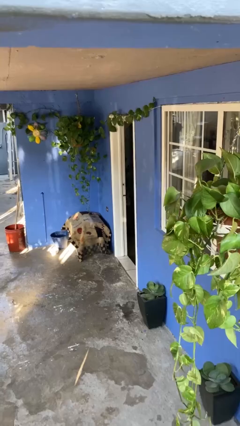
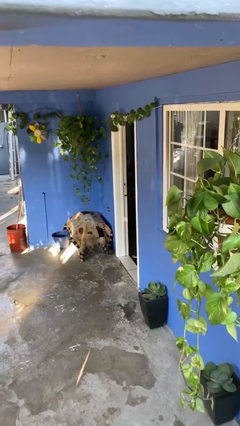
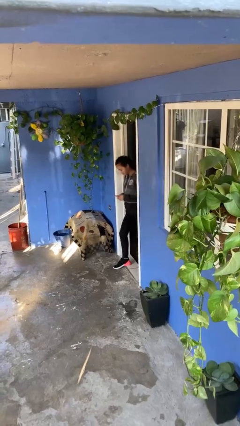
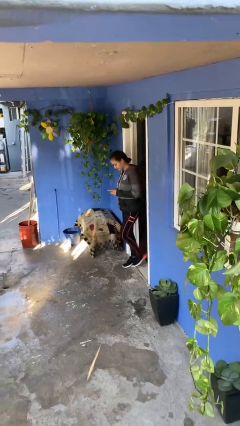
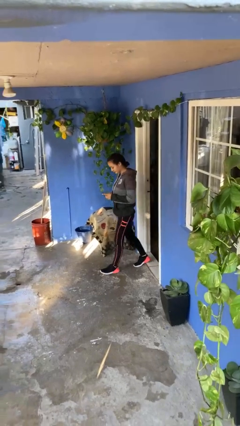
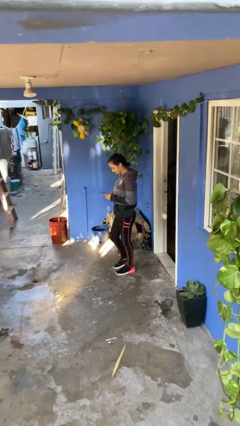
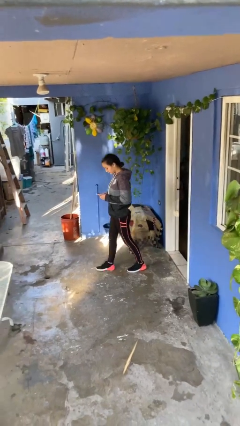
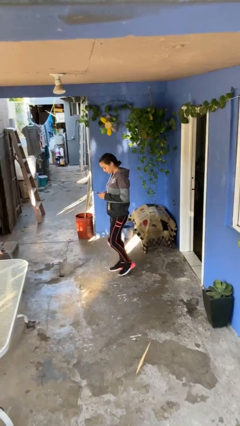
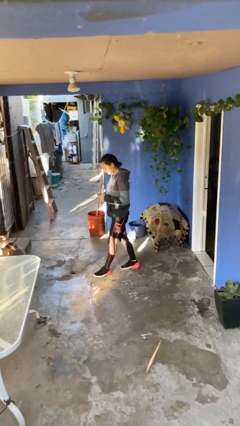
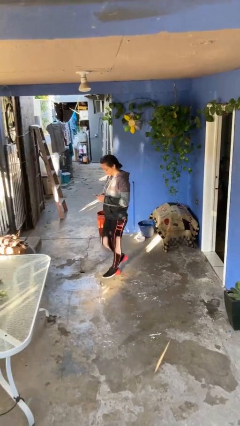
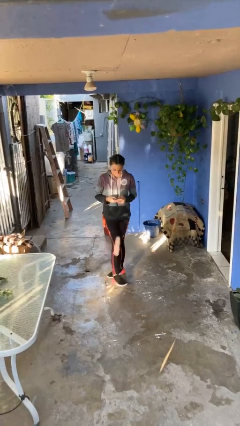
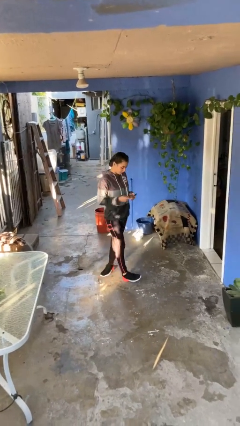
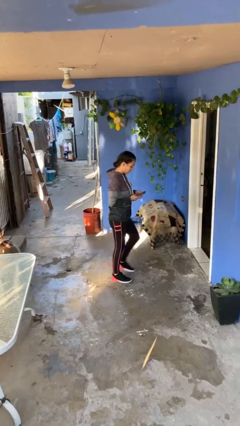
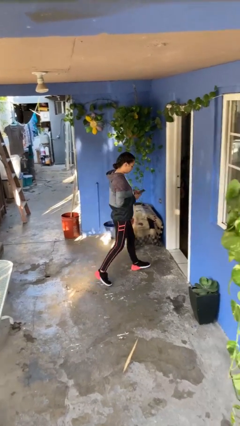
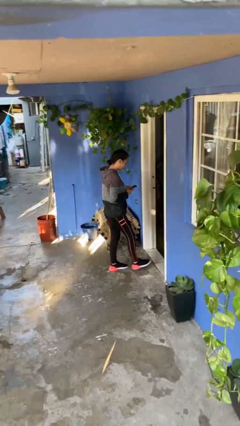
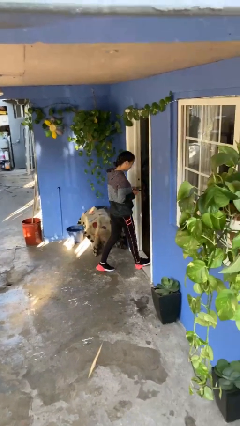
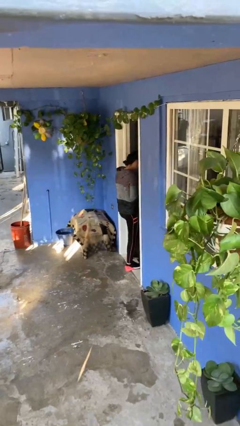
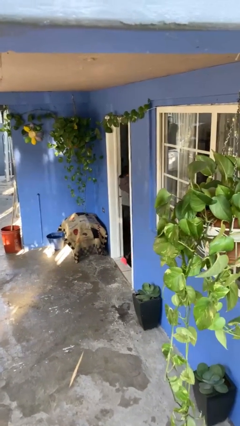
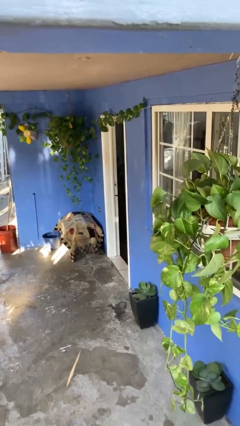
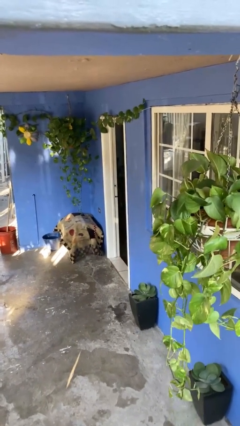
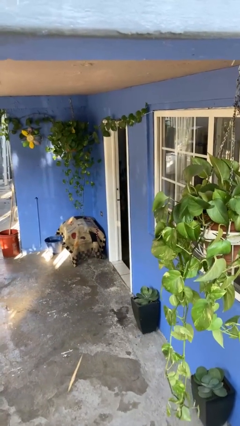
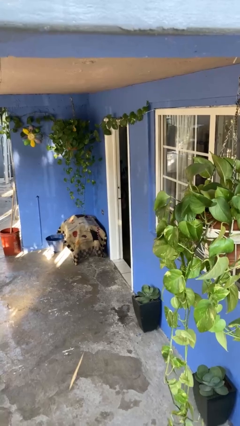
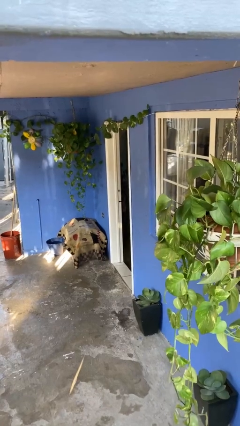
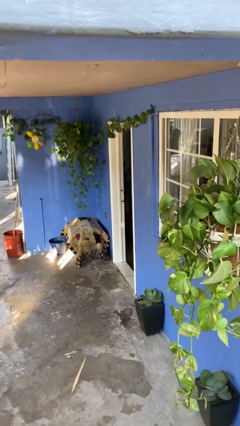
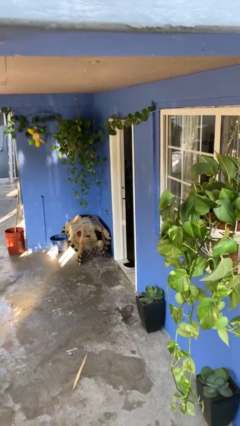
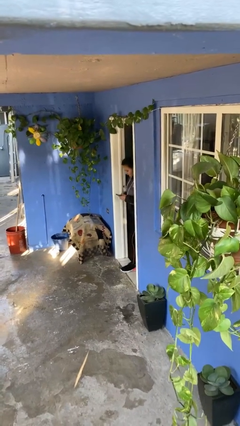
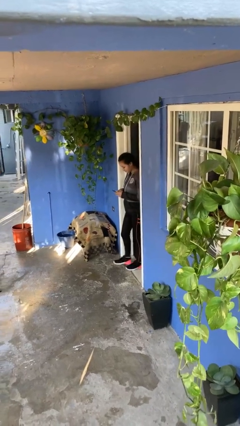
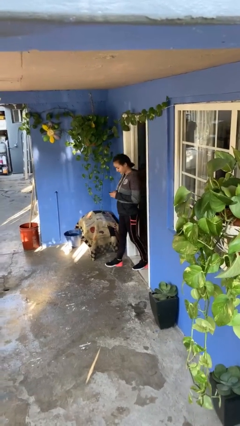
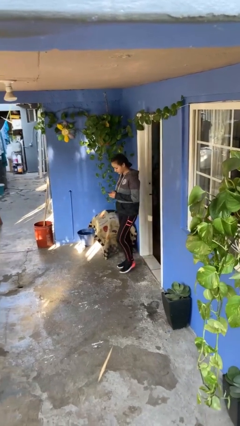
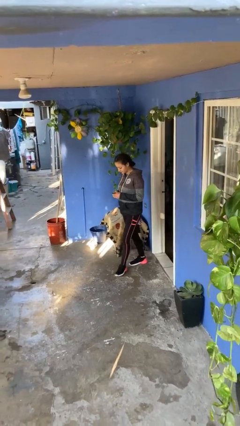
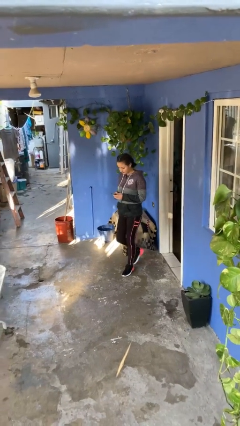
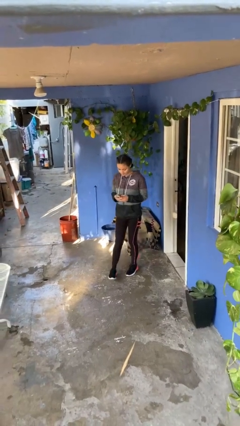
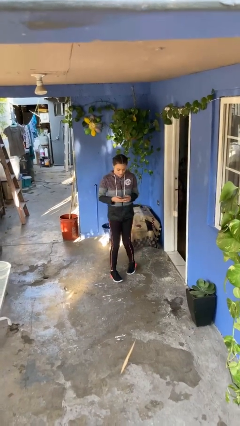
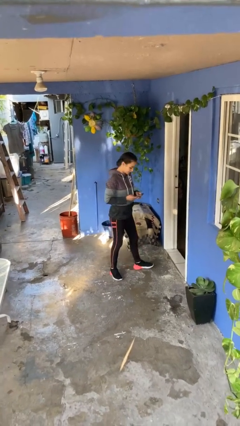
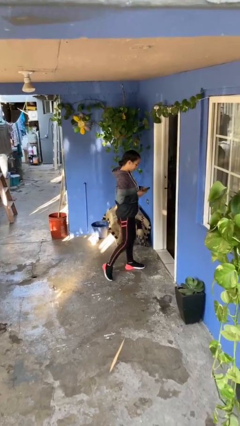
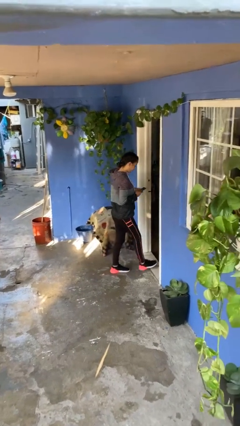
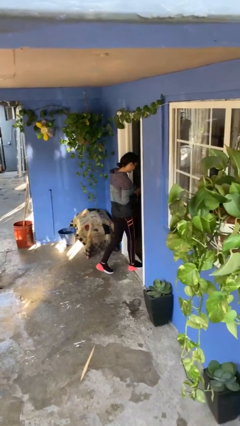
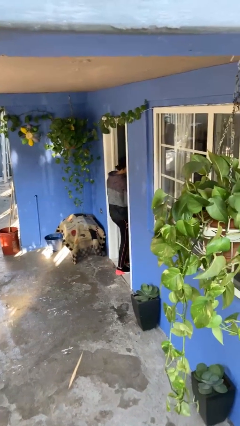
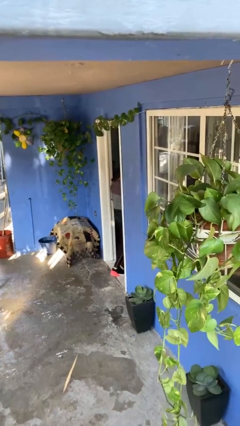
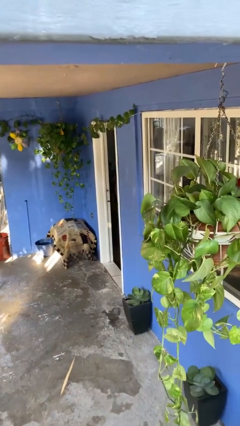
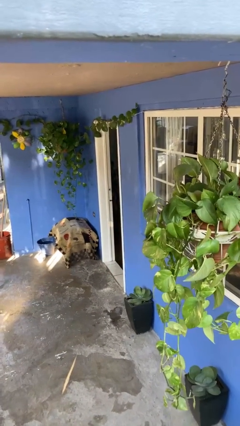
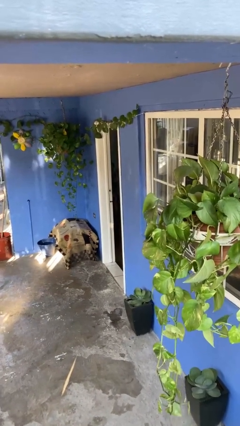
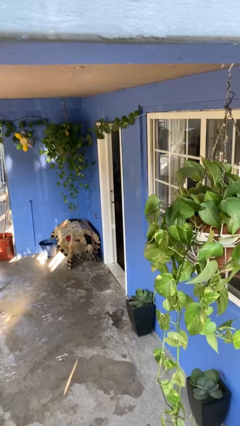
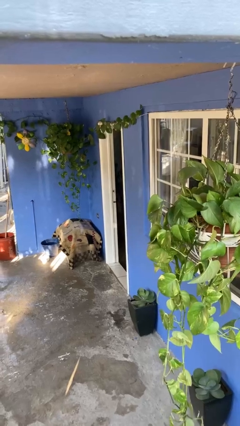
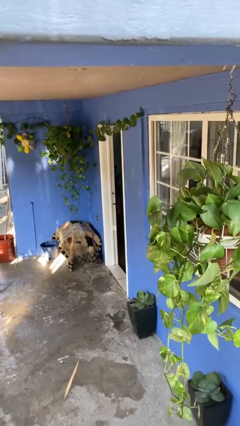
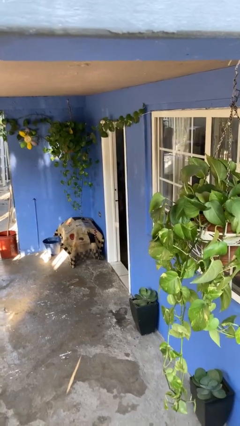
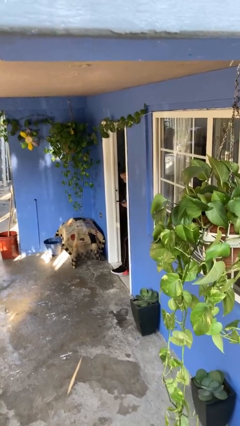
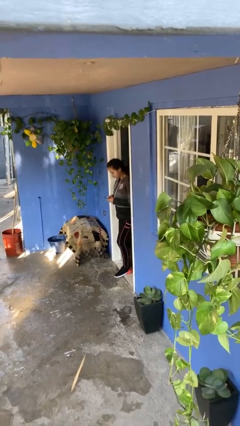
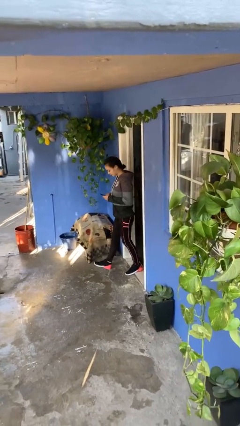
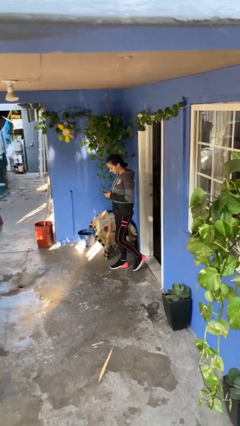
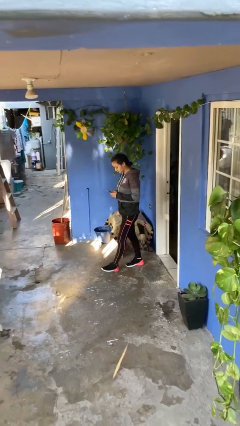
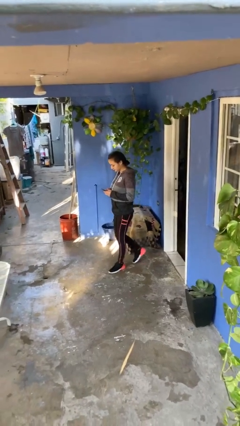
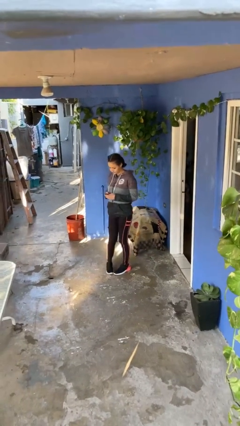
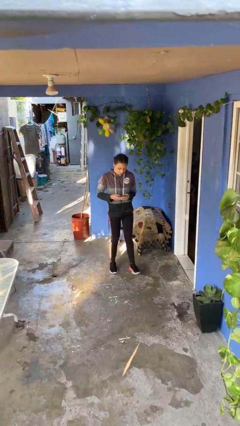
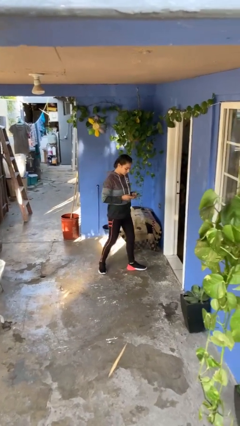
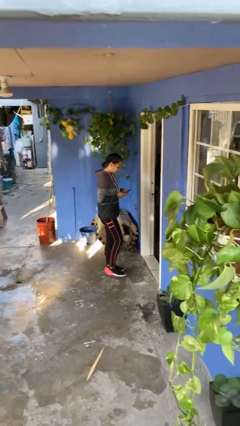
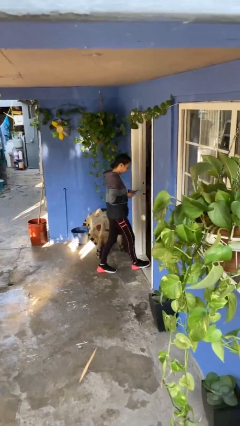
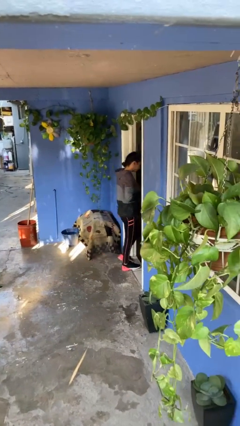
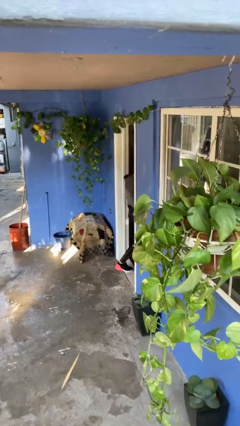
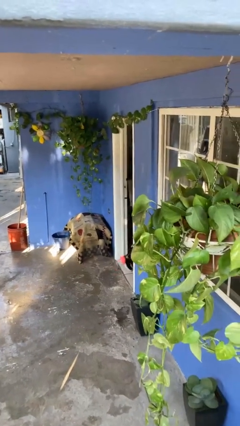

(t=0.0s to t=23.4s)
person texts on phone
